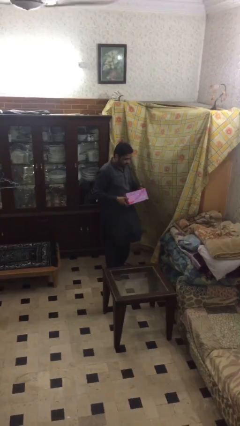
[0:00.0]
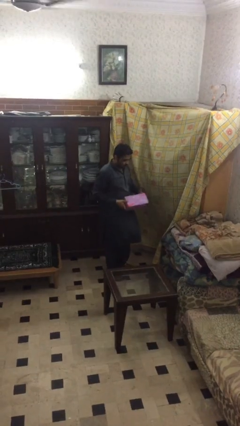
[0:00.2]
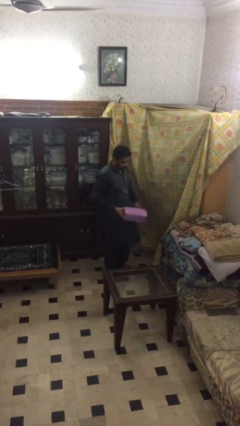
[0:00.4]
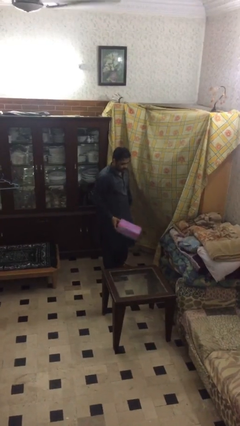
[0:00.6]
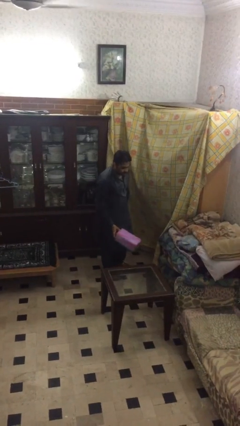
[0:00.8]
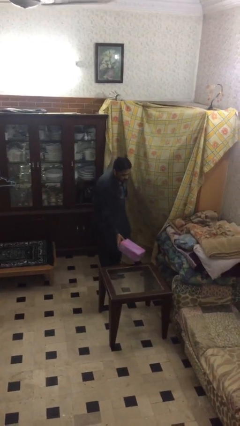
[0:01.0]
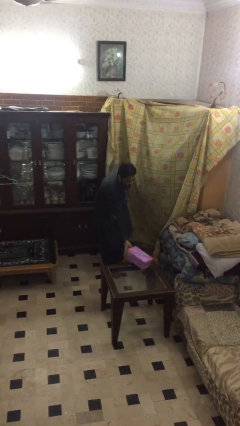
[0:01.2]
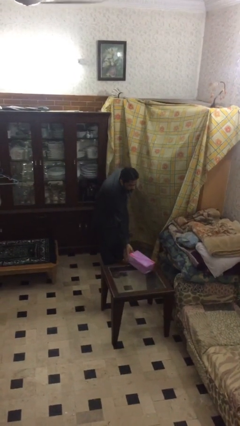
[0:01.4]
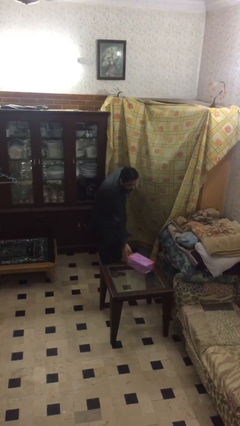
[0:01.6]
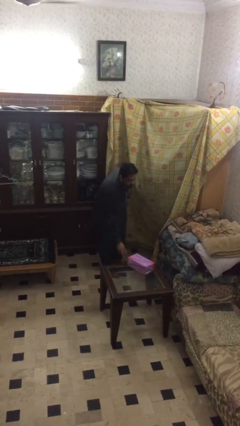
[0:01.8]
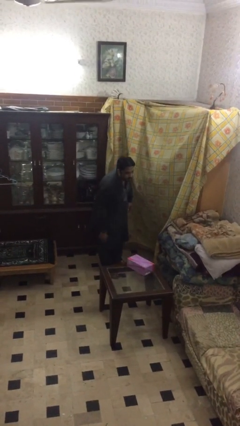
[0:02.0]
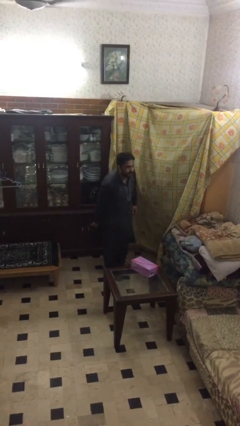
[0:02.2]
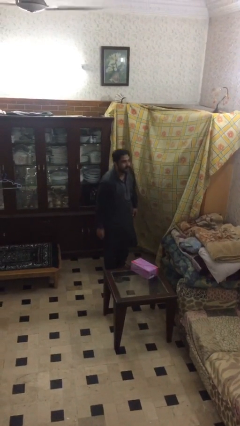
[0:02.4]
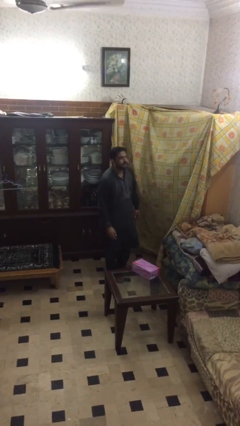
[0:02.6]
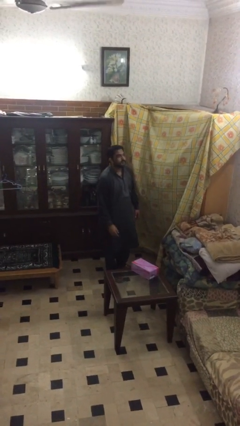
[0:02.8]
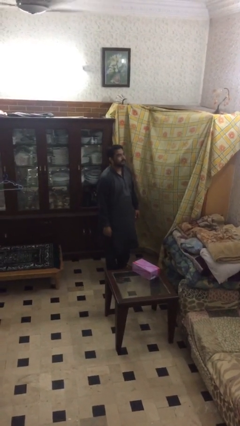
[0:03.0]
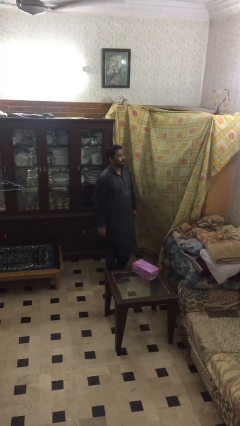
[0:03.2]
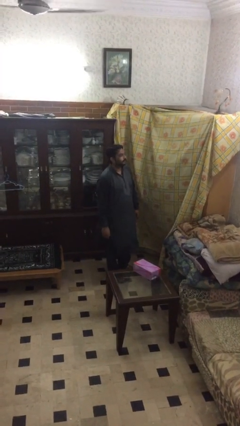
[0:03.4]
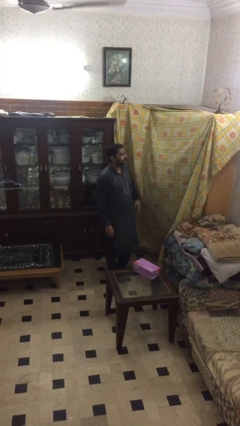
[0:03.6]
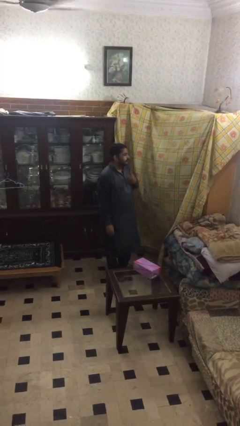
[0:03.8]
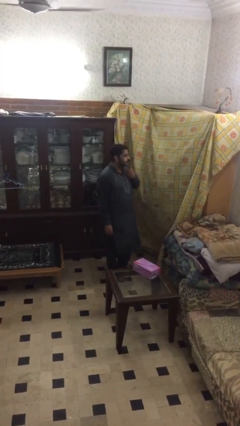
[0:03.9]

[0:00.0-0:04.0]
person puts down object on table

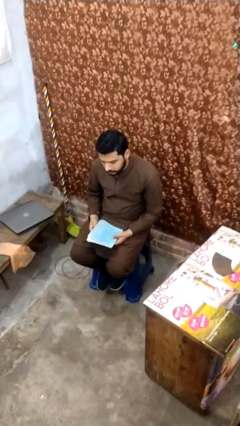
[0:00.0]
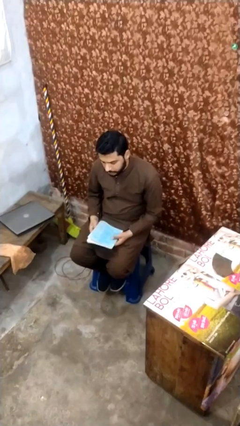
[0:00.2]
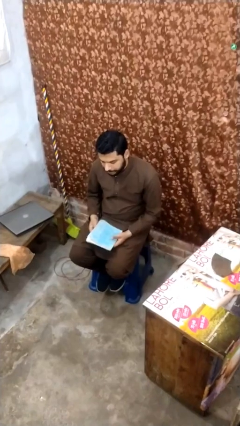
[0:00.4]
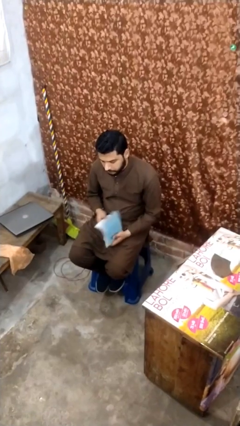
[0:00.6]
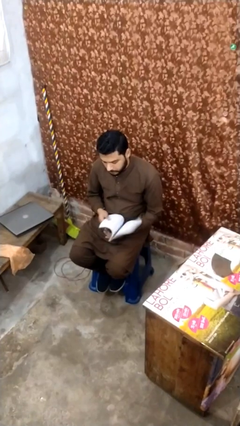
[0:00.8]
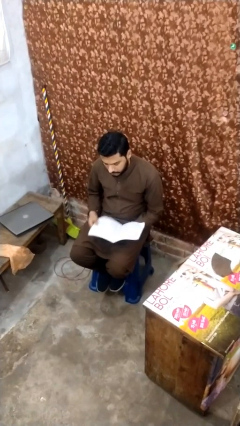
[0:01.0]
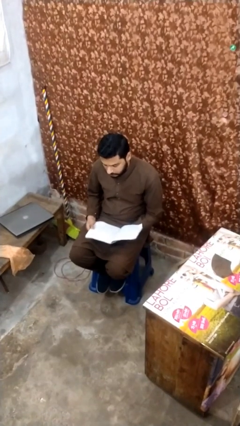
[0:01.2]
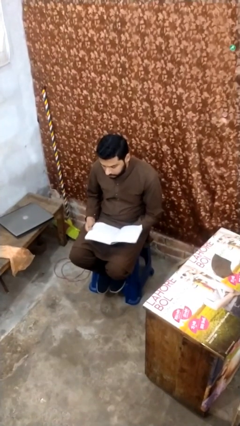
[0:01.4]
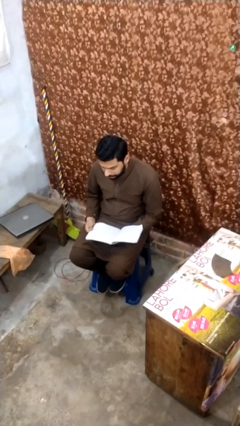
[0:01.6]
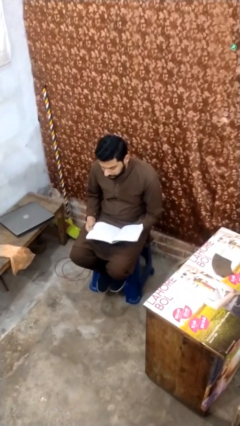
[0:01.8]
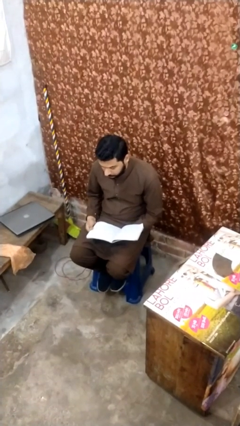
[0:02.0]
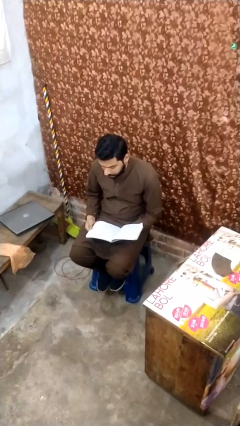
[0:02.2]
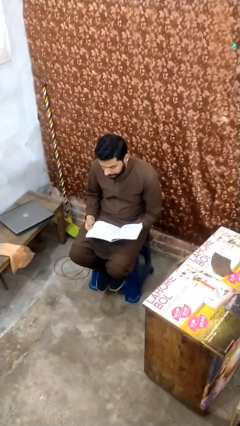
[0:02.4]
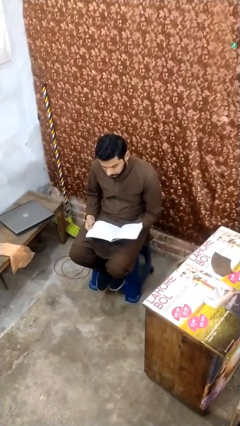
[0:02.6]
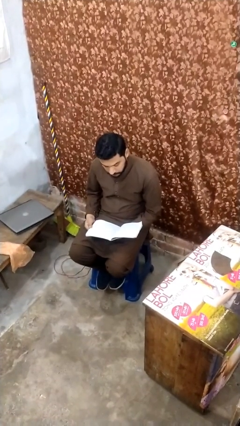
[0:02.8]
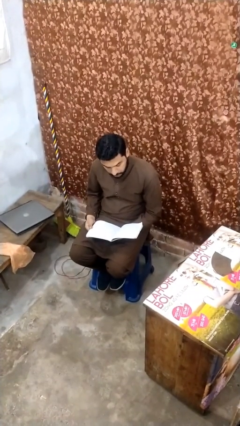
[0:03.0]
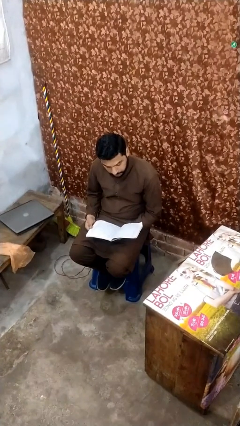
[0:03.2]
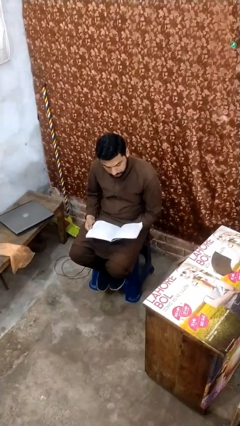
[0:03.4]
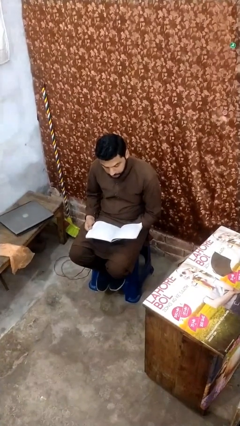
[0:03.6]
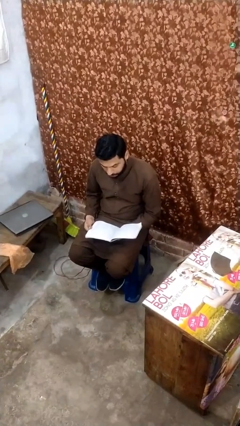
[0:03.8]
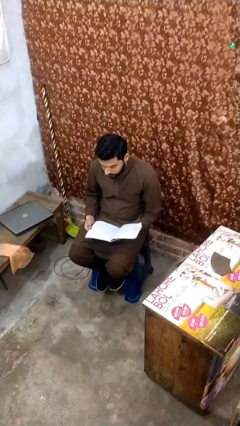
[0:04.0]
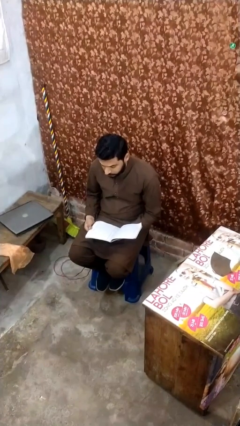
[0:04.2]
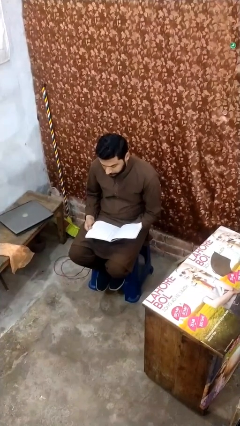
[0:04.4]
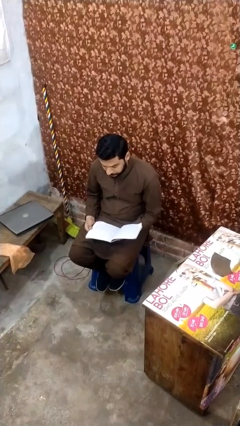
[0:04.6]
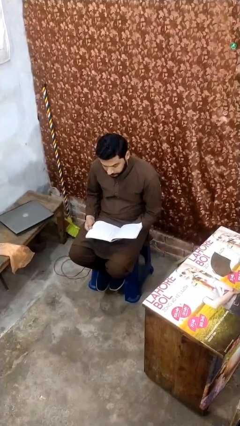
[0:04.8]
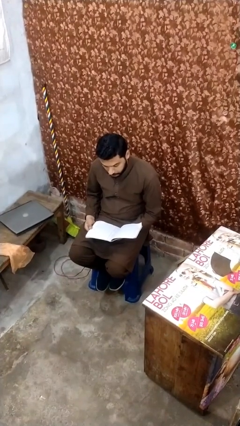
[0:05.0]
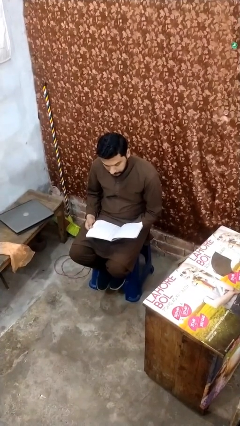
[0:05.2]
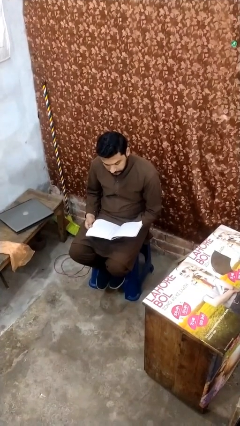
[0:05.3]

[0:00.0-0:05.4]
person reads document

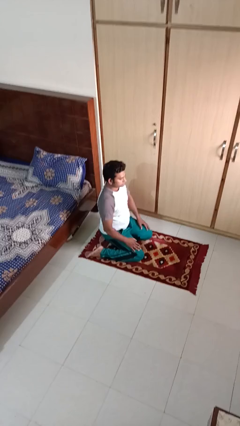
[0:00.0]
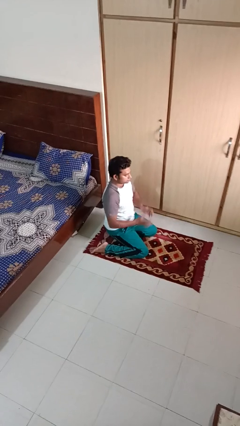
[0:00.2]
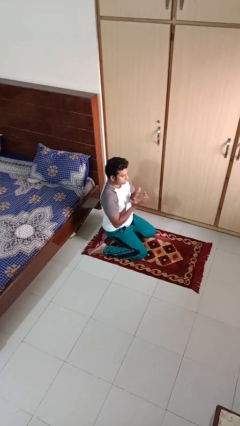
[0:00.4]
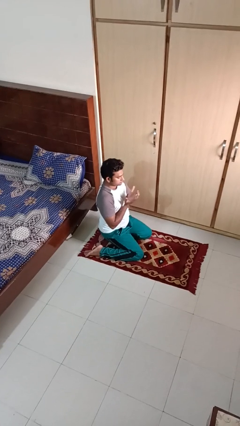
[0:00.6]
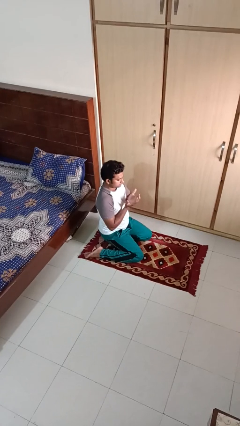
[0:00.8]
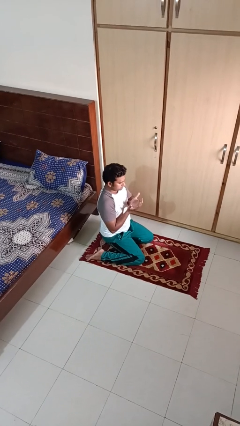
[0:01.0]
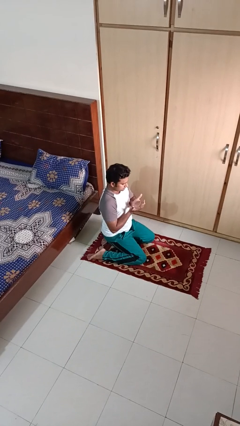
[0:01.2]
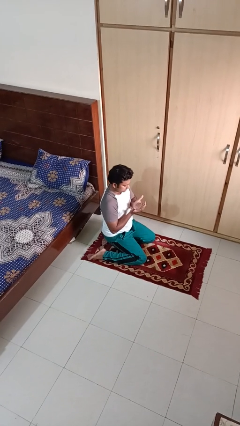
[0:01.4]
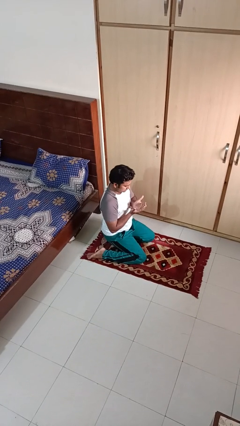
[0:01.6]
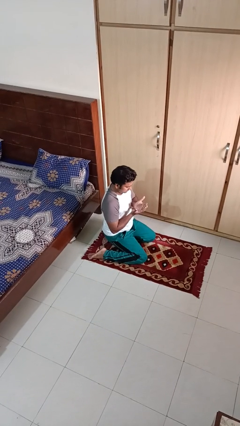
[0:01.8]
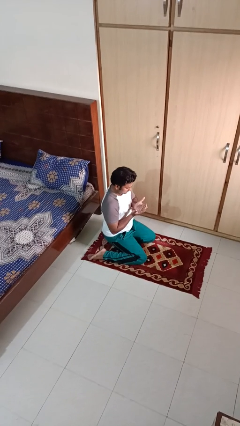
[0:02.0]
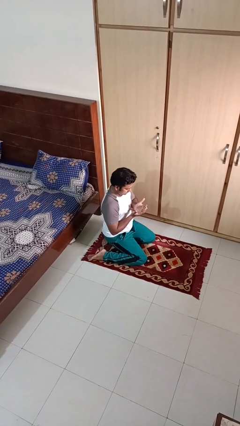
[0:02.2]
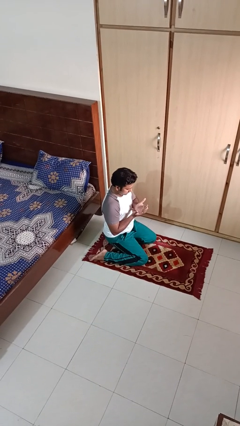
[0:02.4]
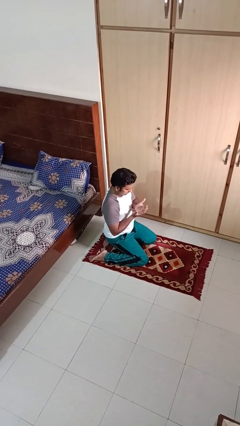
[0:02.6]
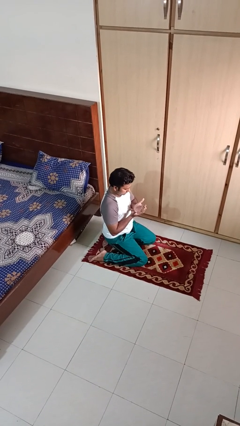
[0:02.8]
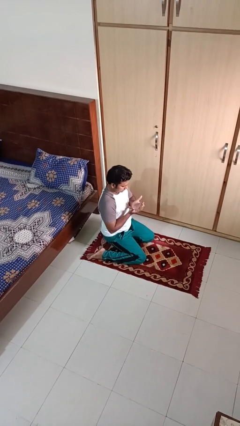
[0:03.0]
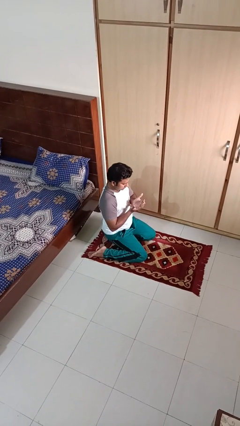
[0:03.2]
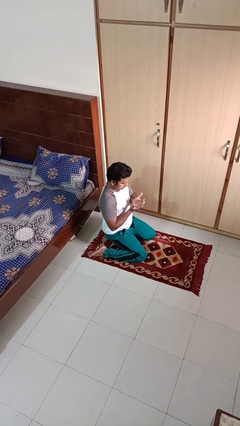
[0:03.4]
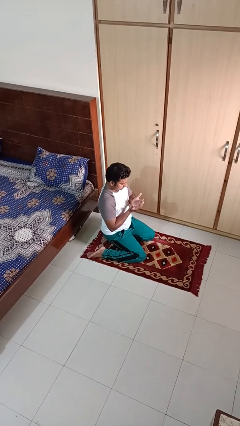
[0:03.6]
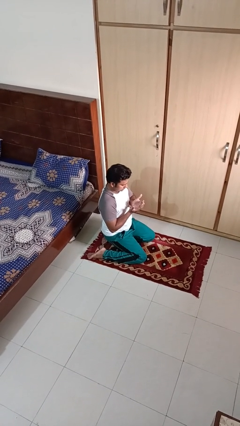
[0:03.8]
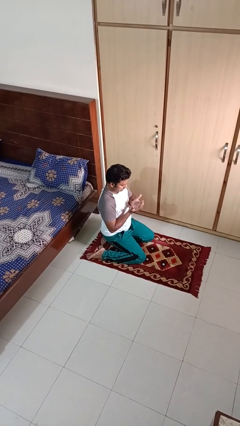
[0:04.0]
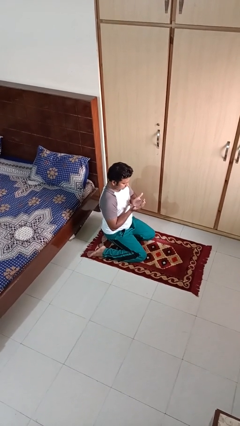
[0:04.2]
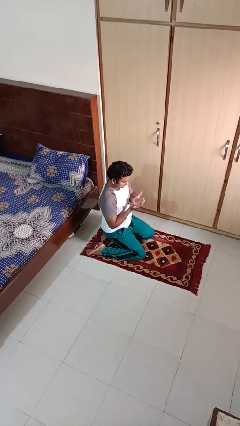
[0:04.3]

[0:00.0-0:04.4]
person prays

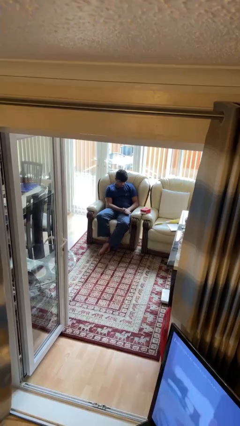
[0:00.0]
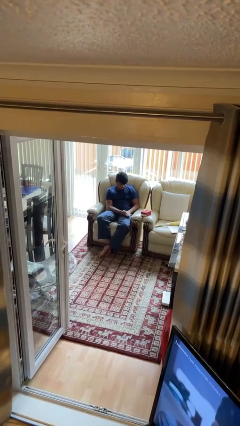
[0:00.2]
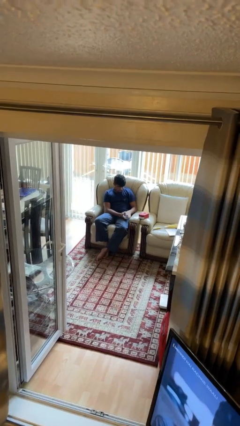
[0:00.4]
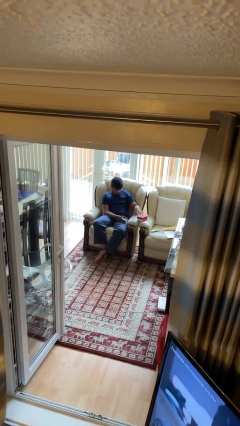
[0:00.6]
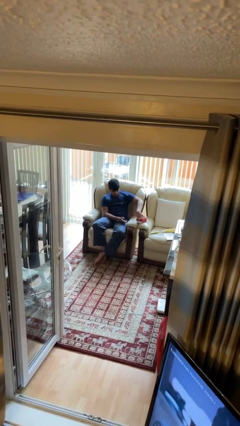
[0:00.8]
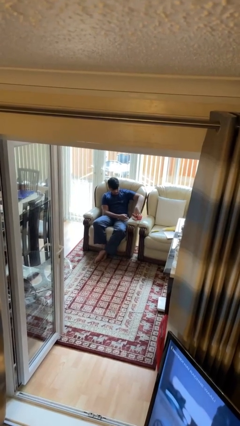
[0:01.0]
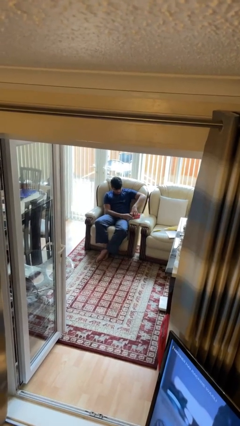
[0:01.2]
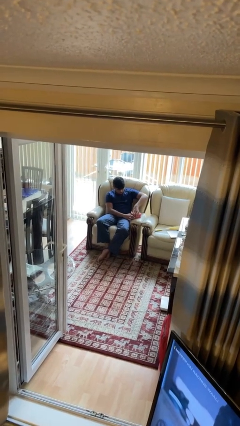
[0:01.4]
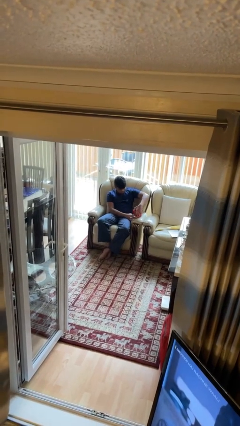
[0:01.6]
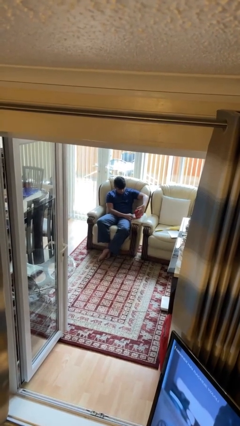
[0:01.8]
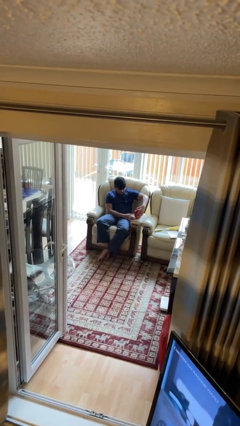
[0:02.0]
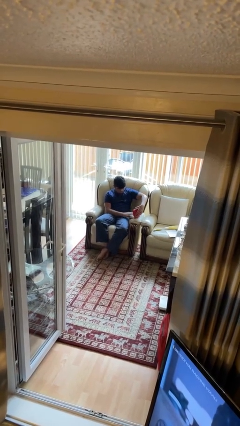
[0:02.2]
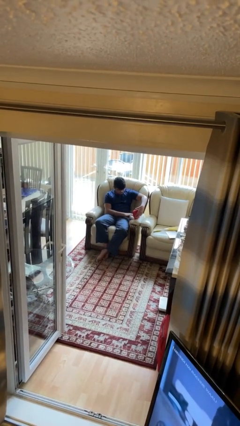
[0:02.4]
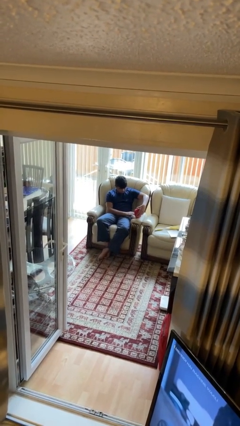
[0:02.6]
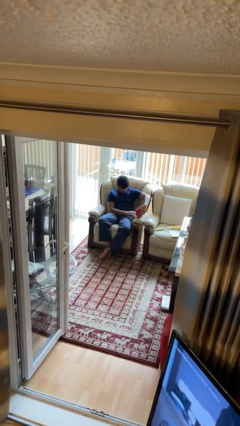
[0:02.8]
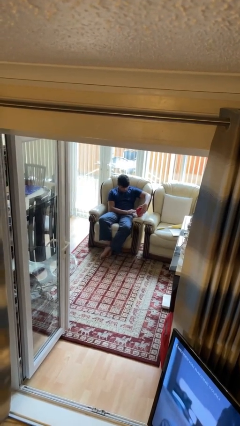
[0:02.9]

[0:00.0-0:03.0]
person opens jewelry box

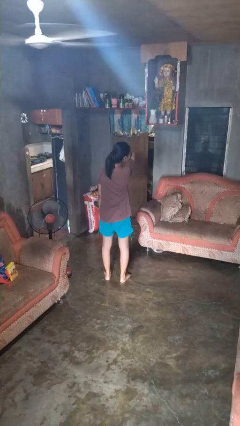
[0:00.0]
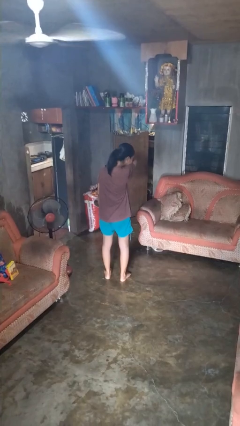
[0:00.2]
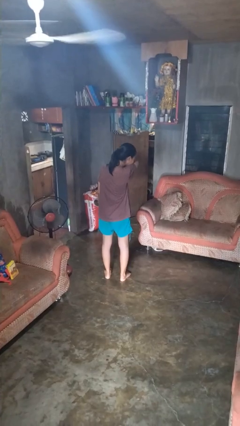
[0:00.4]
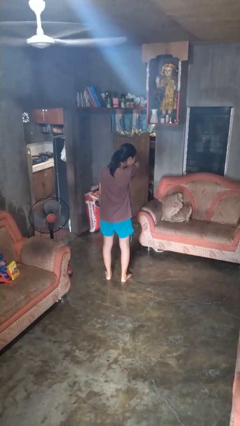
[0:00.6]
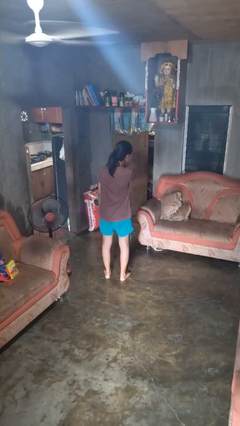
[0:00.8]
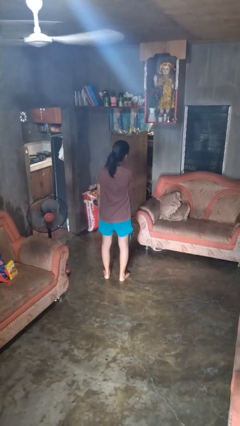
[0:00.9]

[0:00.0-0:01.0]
person sneezes into arm
